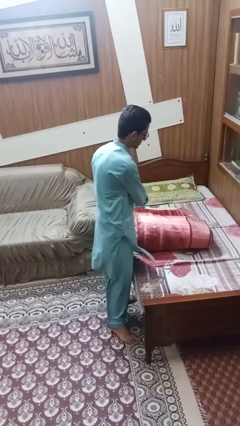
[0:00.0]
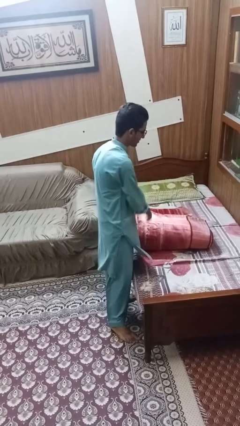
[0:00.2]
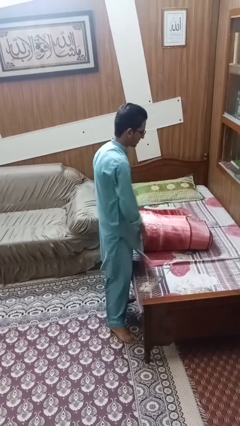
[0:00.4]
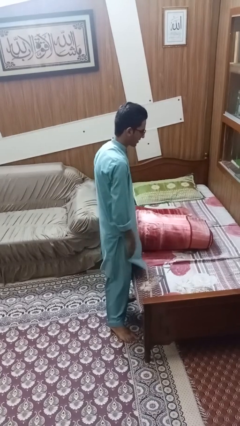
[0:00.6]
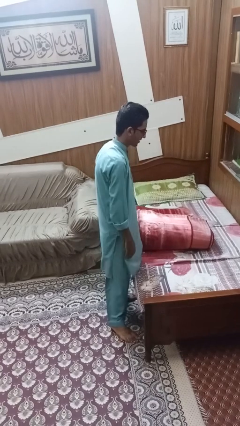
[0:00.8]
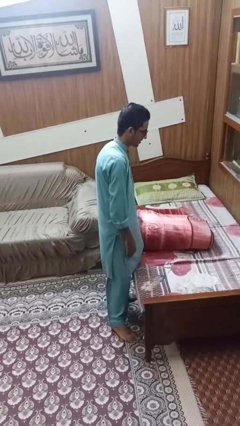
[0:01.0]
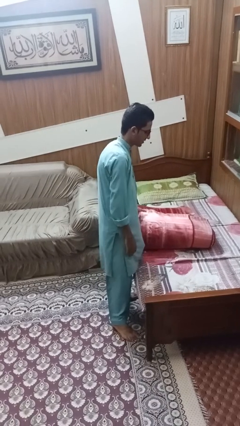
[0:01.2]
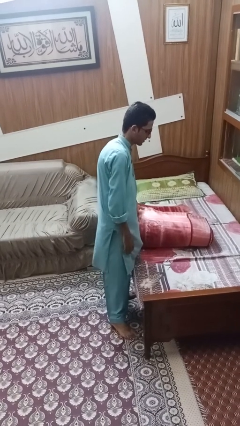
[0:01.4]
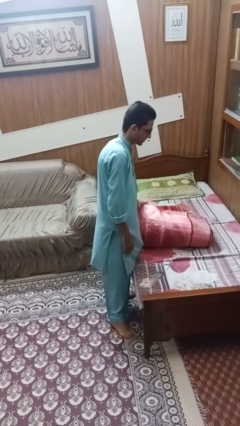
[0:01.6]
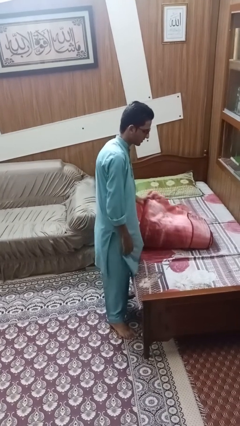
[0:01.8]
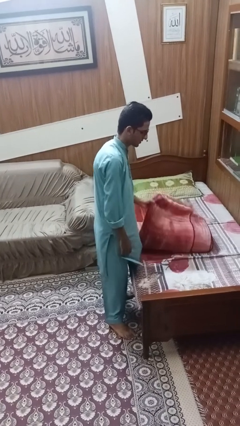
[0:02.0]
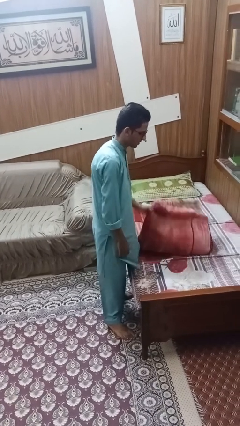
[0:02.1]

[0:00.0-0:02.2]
person folds blanket

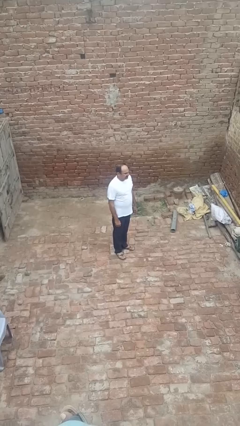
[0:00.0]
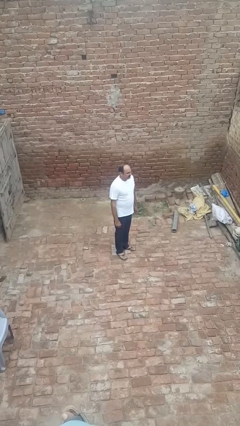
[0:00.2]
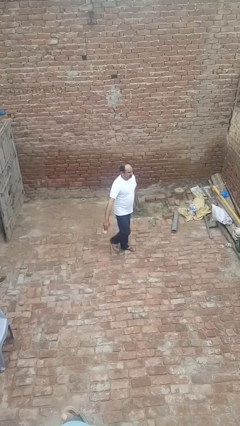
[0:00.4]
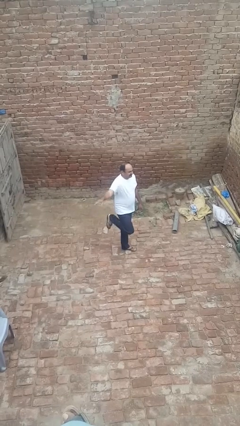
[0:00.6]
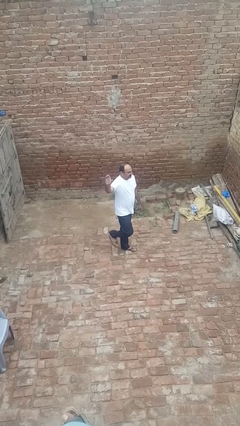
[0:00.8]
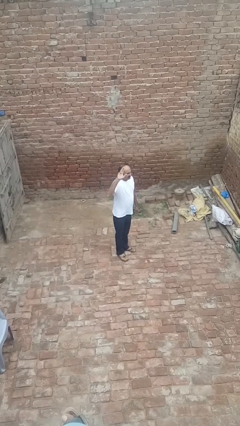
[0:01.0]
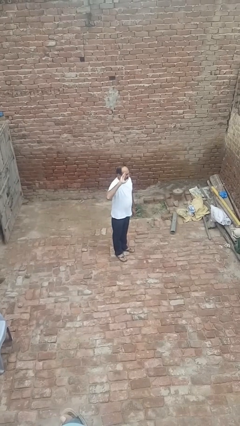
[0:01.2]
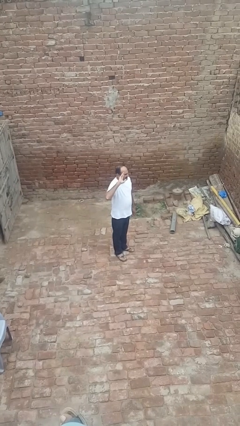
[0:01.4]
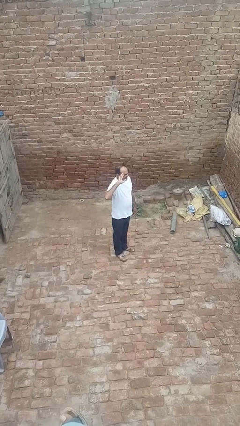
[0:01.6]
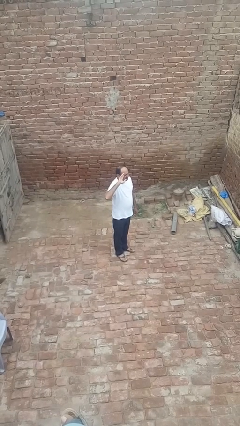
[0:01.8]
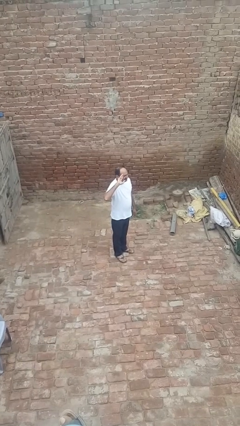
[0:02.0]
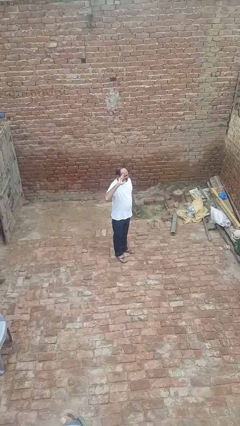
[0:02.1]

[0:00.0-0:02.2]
person salutes

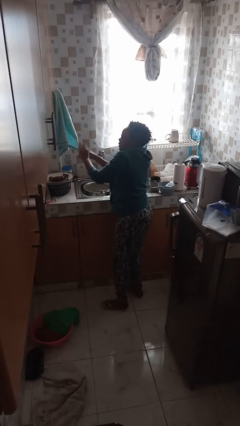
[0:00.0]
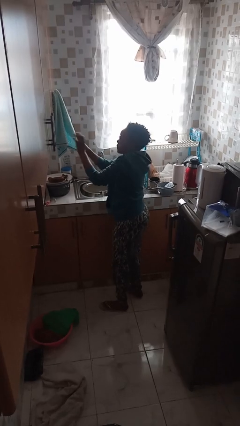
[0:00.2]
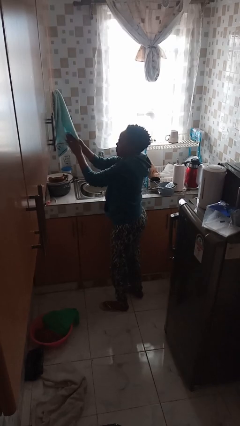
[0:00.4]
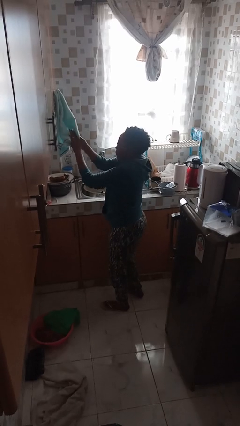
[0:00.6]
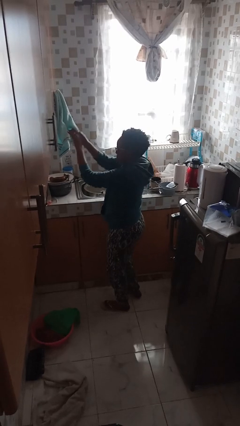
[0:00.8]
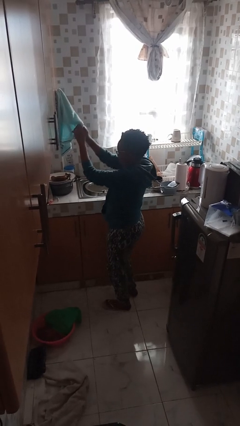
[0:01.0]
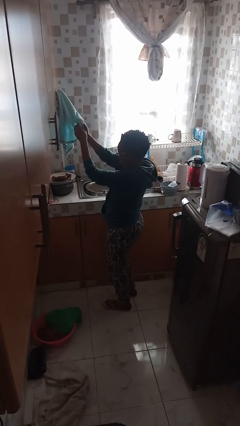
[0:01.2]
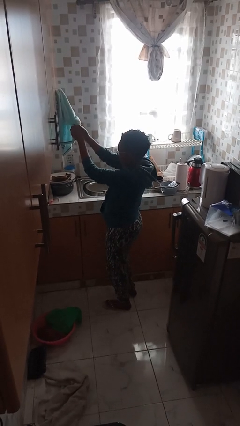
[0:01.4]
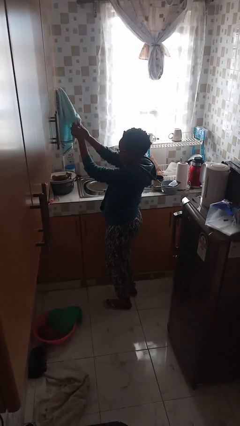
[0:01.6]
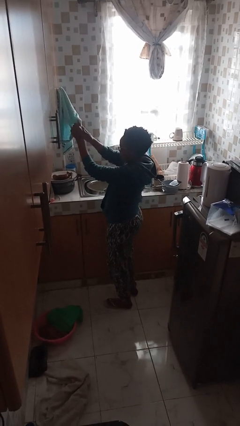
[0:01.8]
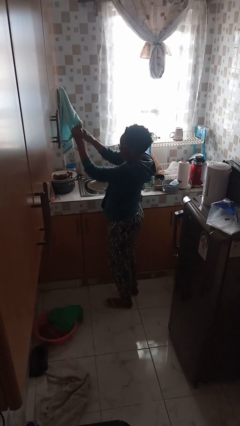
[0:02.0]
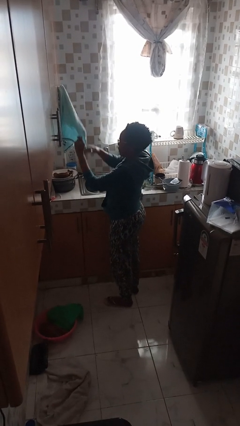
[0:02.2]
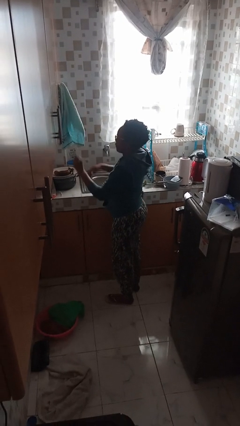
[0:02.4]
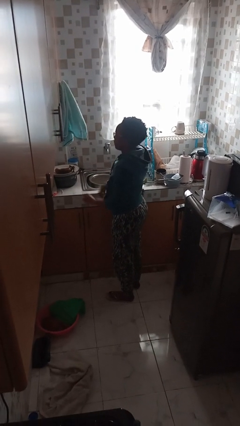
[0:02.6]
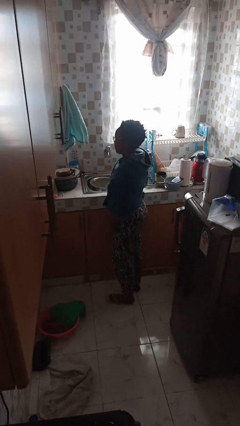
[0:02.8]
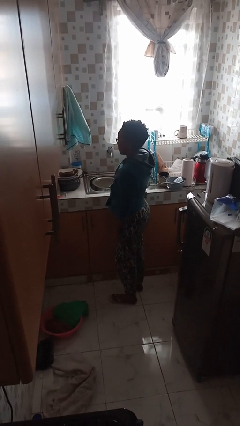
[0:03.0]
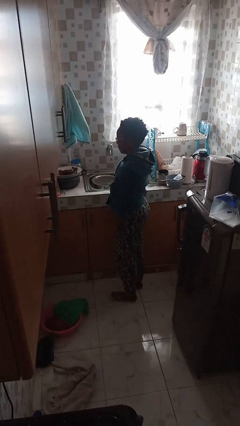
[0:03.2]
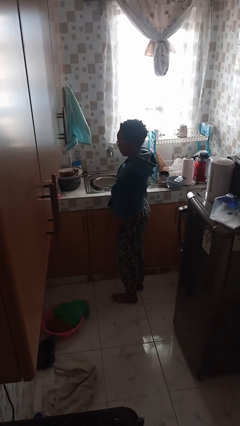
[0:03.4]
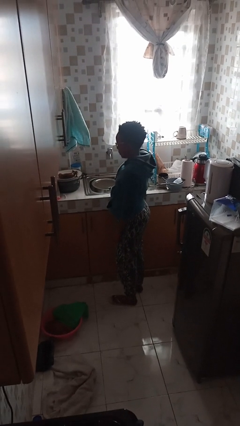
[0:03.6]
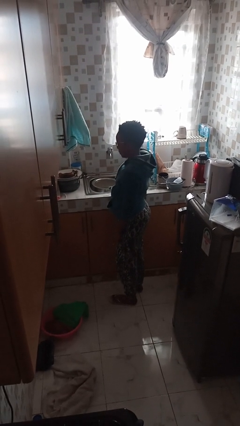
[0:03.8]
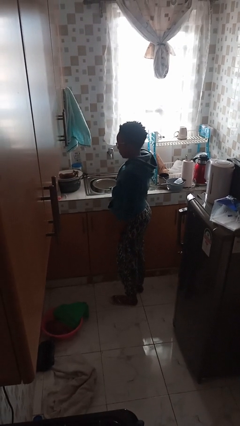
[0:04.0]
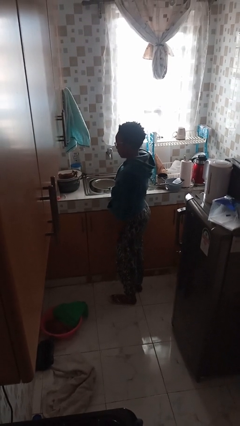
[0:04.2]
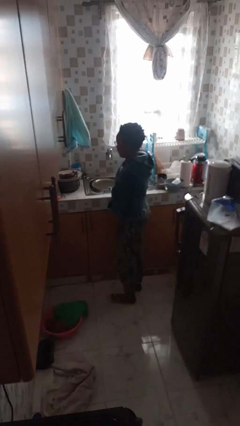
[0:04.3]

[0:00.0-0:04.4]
person dries hands with towel

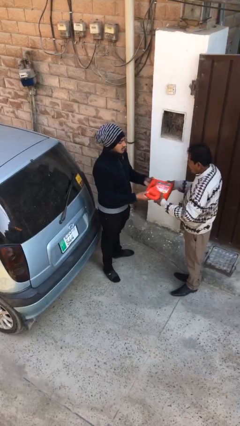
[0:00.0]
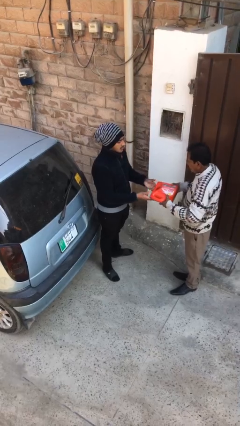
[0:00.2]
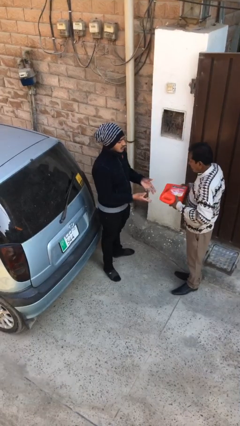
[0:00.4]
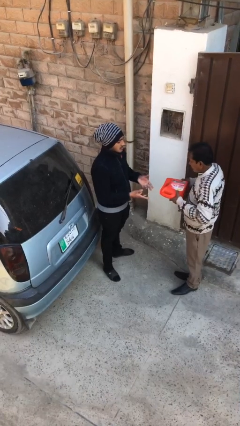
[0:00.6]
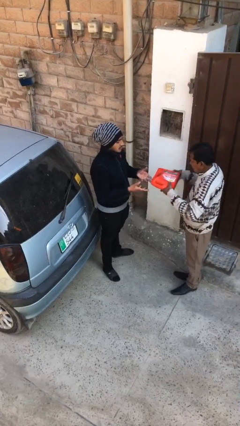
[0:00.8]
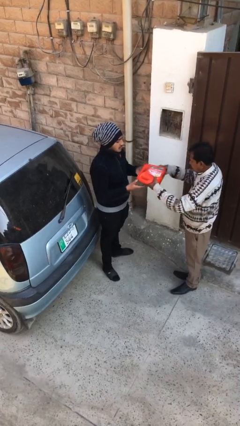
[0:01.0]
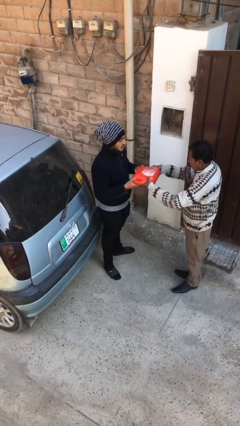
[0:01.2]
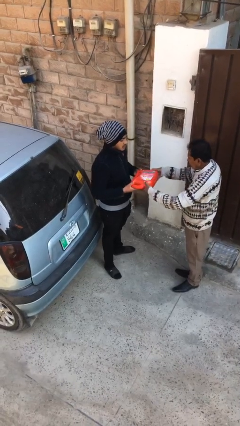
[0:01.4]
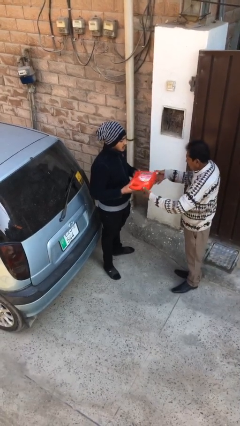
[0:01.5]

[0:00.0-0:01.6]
person transfers object to person

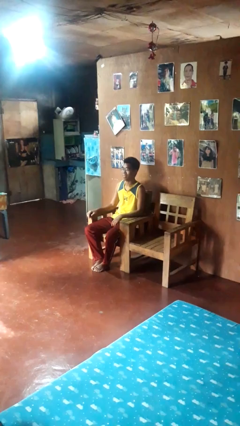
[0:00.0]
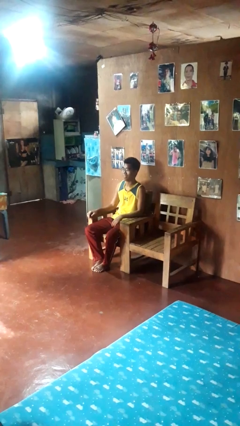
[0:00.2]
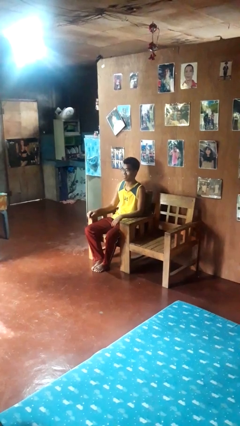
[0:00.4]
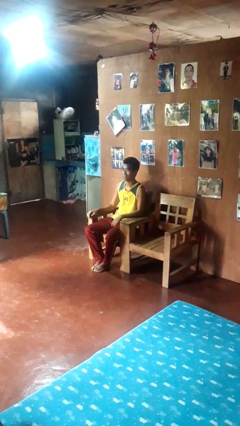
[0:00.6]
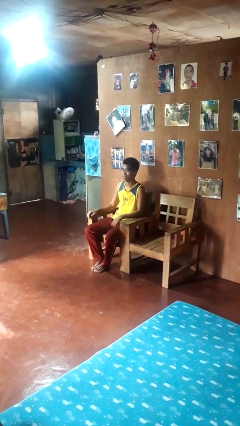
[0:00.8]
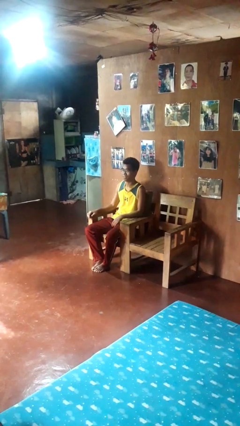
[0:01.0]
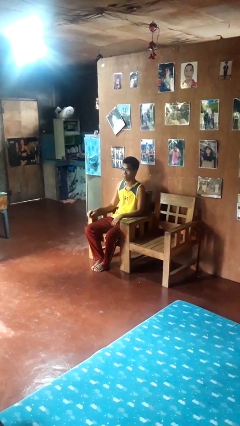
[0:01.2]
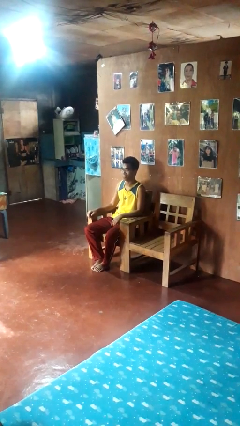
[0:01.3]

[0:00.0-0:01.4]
person nods head

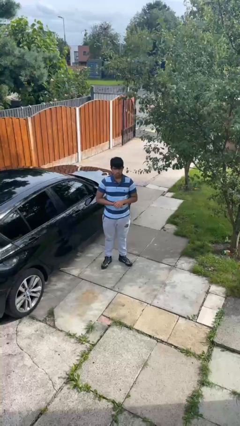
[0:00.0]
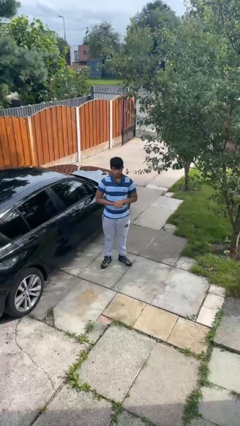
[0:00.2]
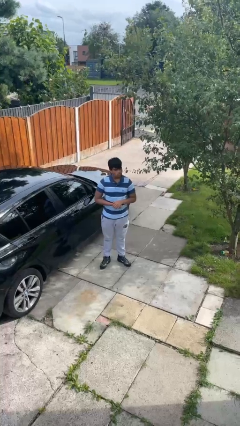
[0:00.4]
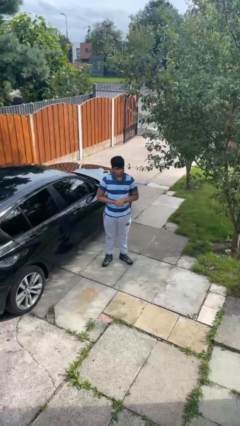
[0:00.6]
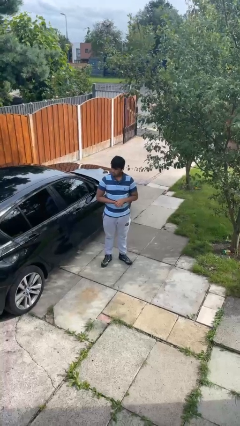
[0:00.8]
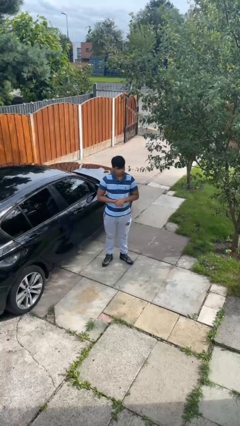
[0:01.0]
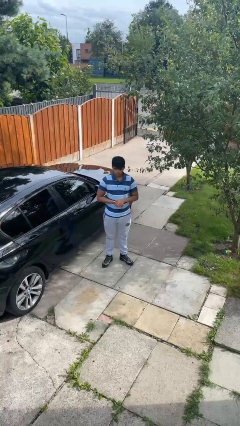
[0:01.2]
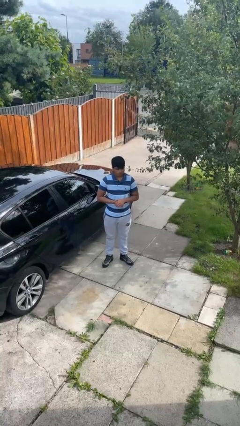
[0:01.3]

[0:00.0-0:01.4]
person shakes head

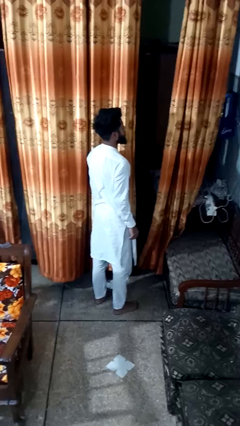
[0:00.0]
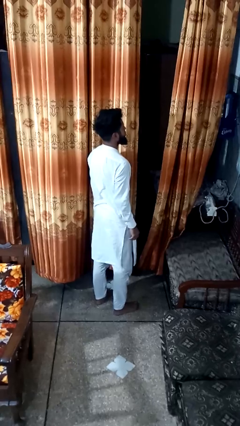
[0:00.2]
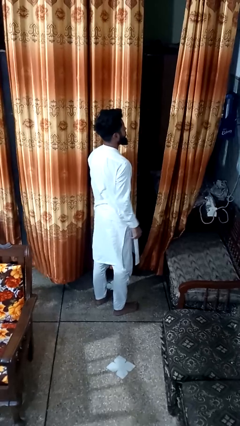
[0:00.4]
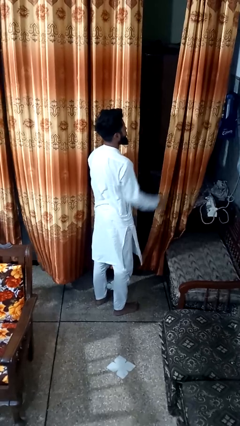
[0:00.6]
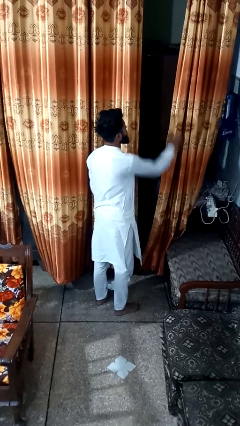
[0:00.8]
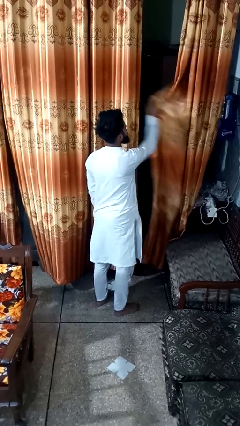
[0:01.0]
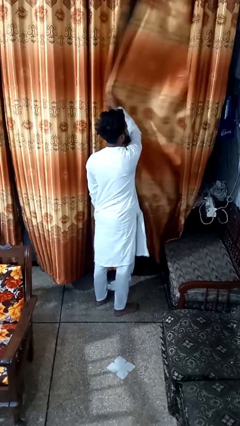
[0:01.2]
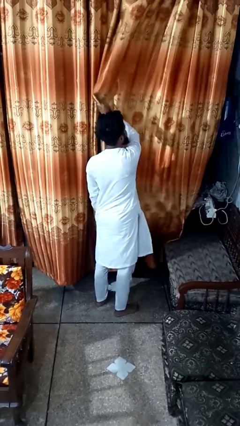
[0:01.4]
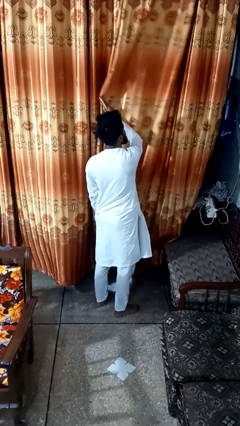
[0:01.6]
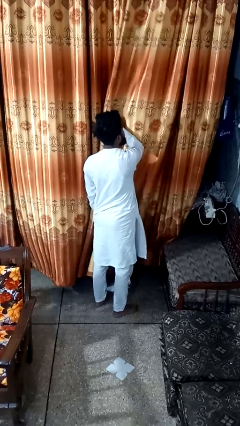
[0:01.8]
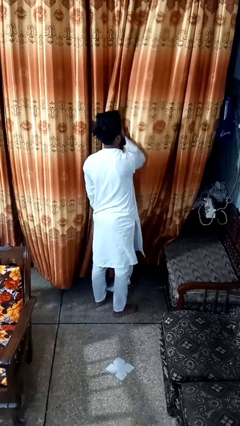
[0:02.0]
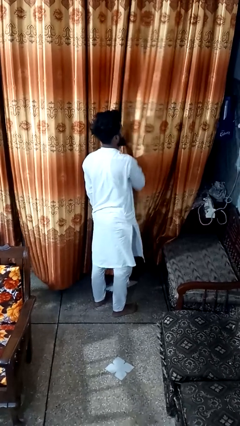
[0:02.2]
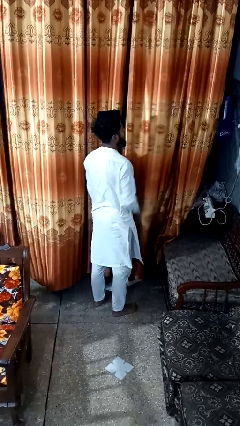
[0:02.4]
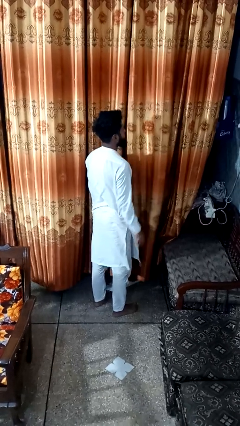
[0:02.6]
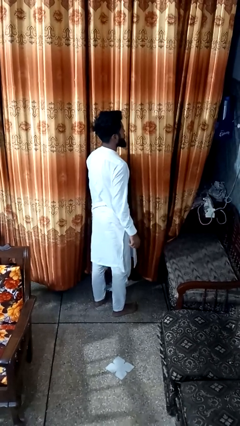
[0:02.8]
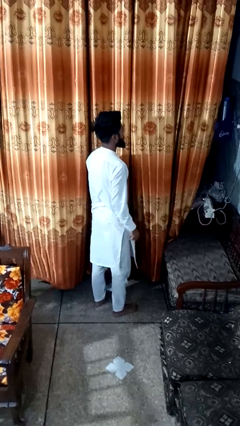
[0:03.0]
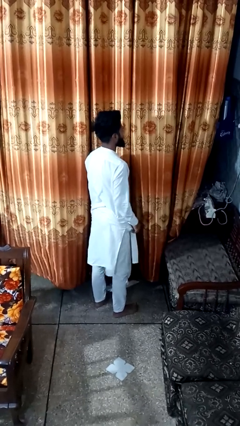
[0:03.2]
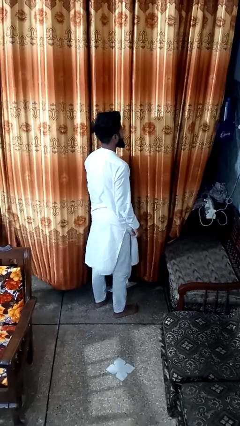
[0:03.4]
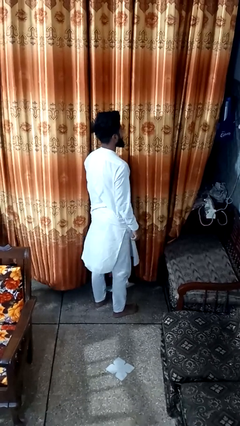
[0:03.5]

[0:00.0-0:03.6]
person closes curtains

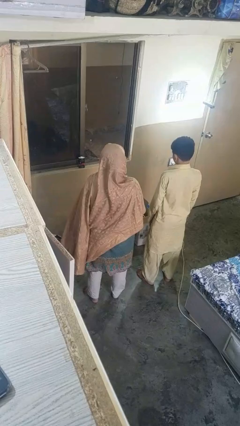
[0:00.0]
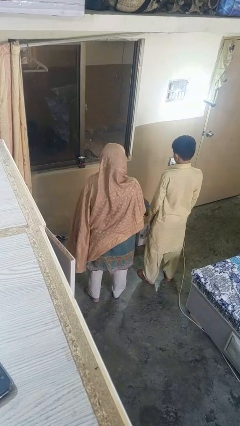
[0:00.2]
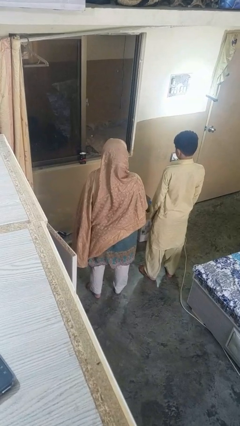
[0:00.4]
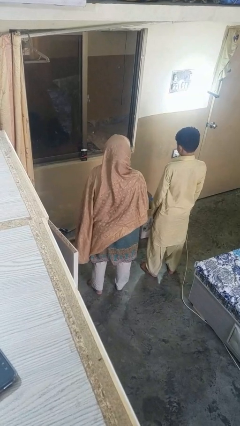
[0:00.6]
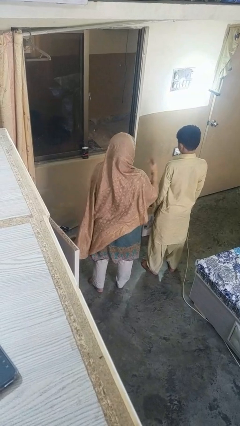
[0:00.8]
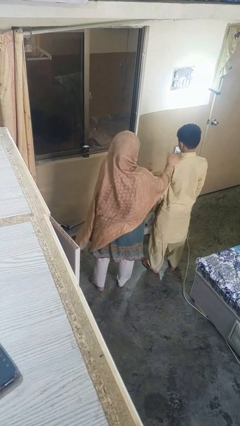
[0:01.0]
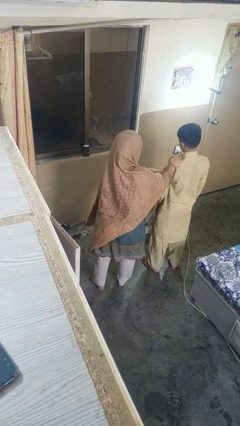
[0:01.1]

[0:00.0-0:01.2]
person shoves person
